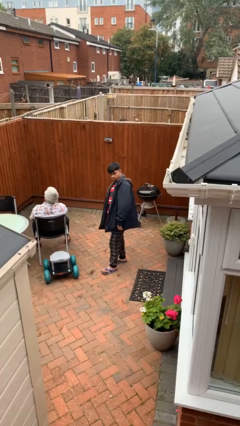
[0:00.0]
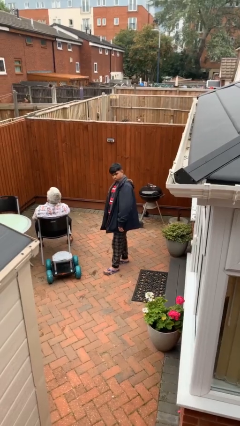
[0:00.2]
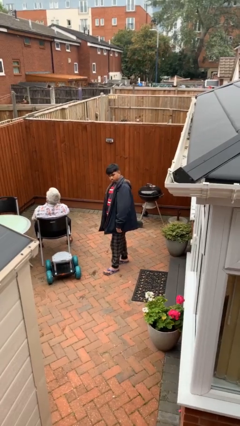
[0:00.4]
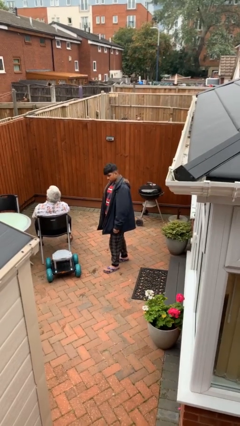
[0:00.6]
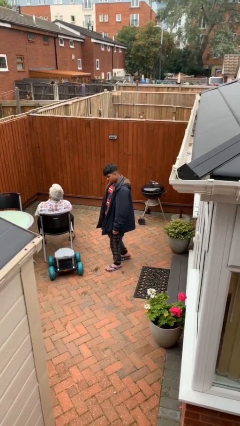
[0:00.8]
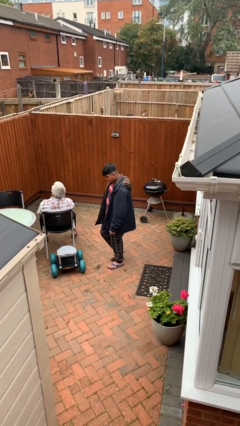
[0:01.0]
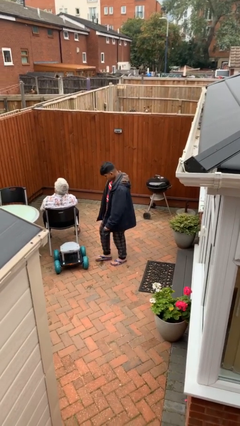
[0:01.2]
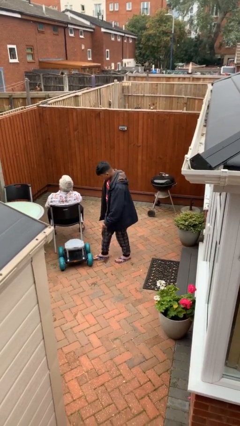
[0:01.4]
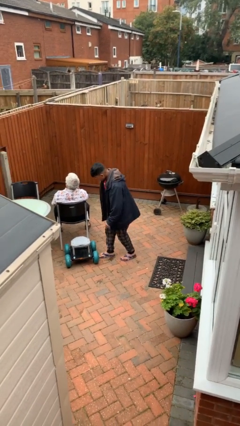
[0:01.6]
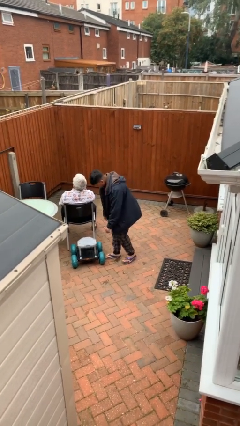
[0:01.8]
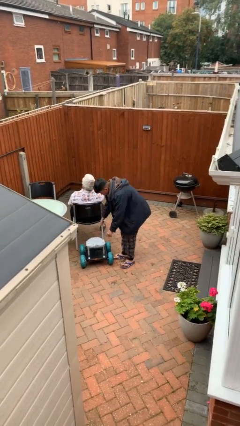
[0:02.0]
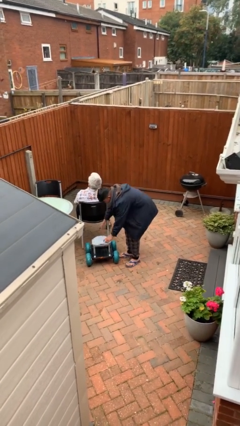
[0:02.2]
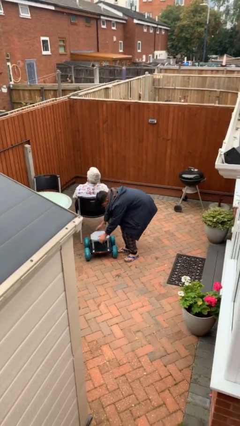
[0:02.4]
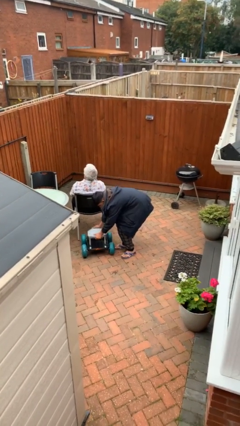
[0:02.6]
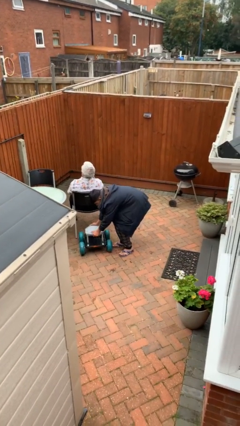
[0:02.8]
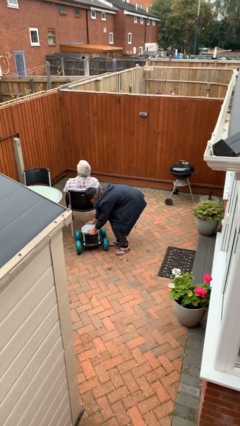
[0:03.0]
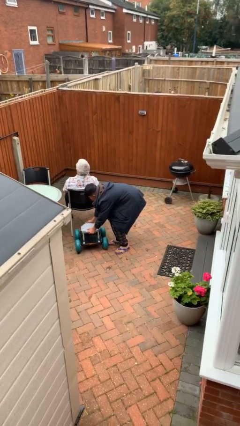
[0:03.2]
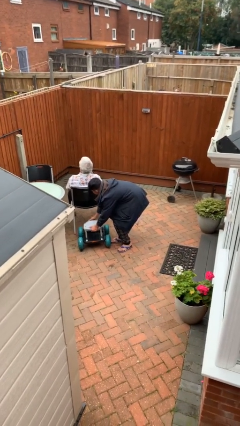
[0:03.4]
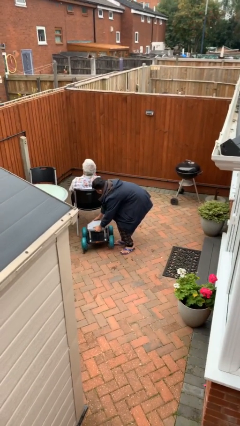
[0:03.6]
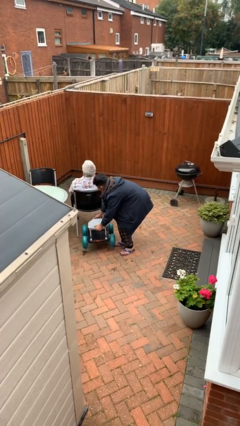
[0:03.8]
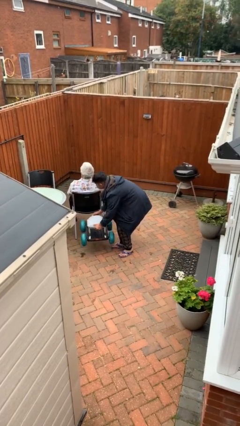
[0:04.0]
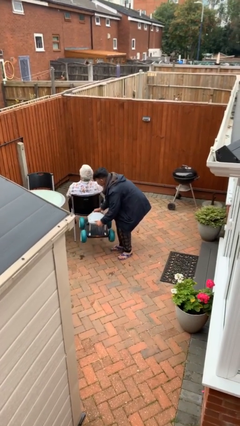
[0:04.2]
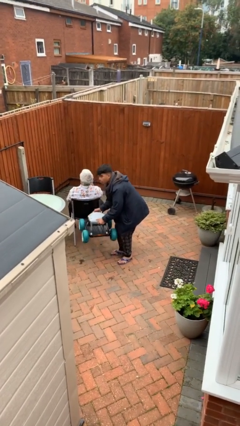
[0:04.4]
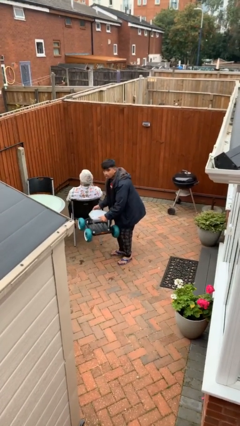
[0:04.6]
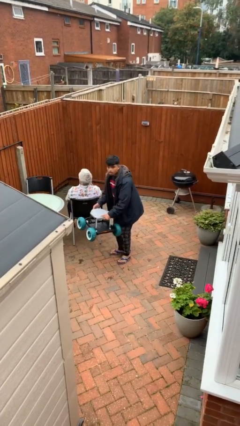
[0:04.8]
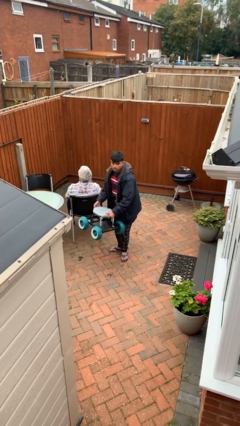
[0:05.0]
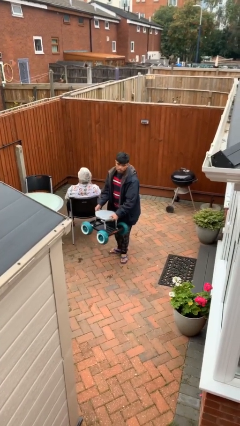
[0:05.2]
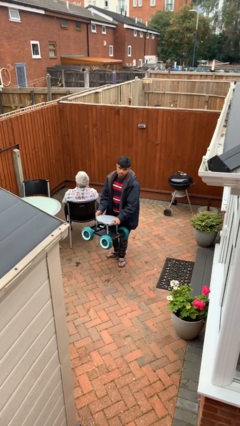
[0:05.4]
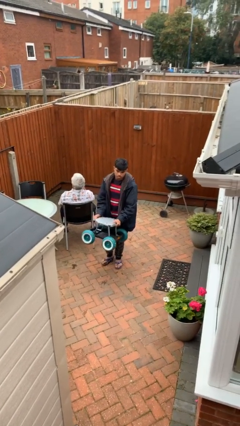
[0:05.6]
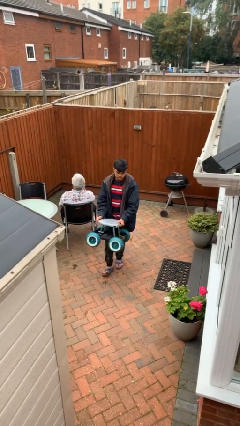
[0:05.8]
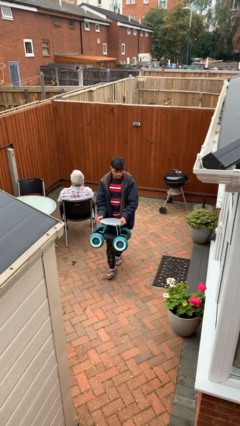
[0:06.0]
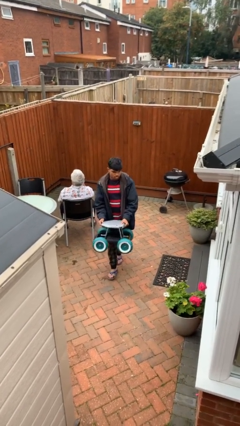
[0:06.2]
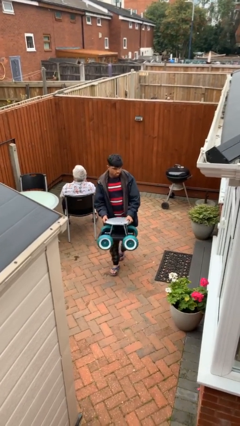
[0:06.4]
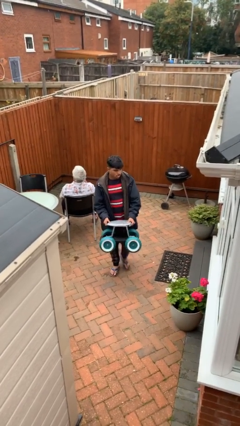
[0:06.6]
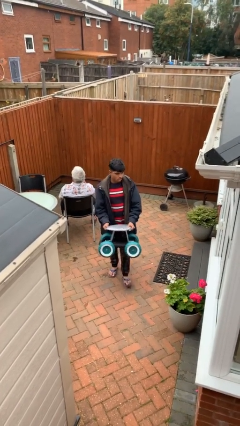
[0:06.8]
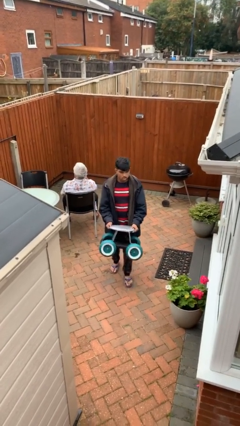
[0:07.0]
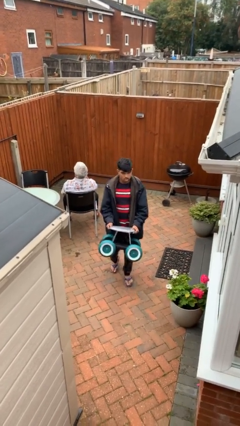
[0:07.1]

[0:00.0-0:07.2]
person steals object from person

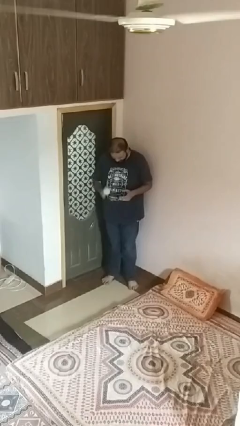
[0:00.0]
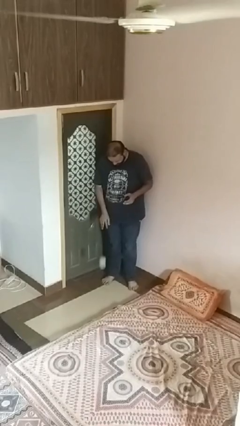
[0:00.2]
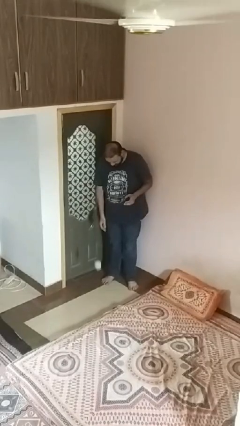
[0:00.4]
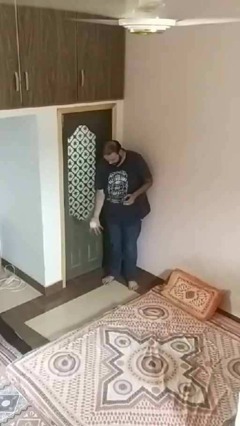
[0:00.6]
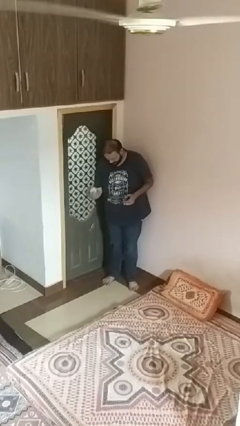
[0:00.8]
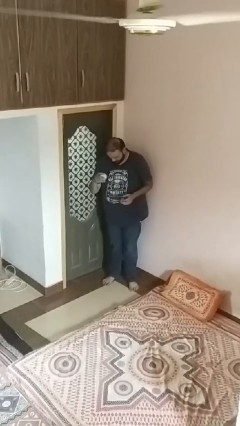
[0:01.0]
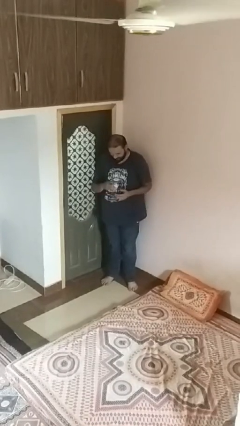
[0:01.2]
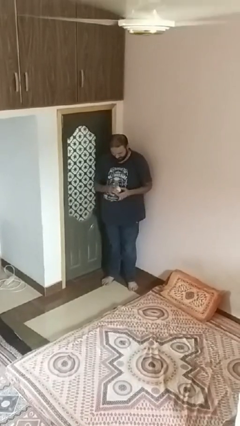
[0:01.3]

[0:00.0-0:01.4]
person bounces ball on floor

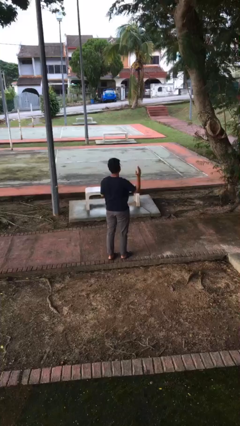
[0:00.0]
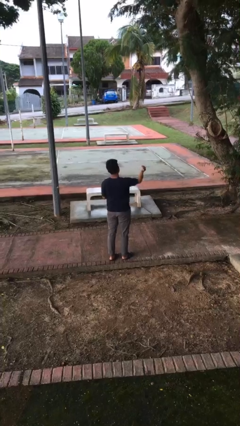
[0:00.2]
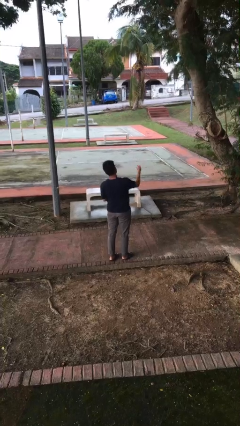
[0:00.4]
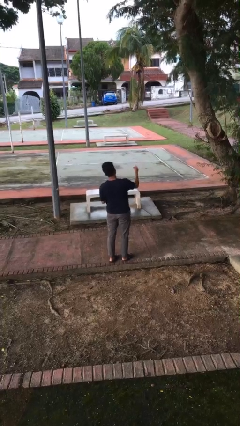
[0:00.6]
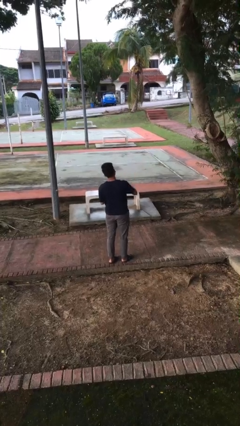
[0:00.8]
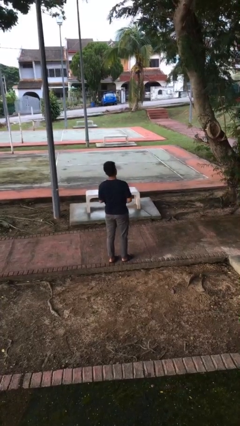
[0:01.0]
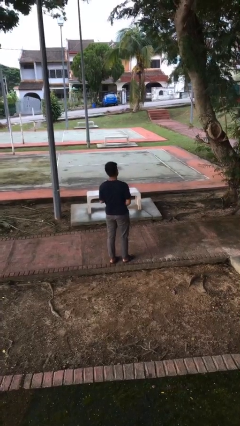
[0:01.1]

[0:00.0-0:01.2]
person karate chop

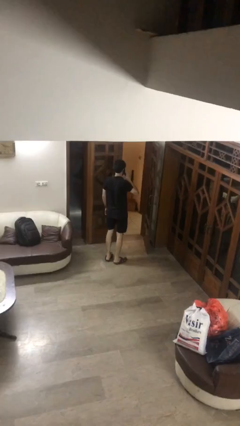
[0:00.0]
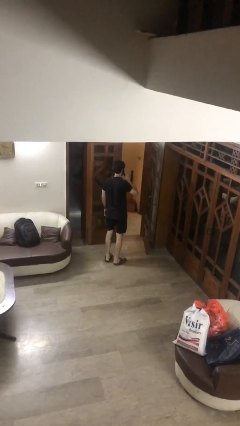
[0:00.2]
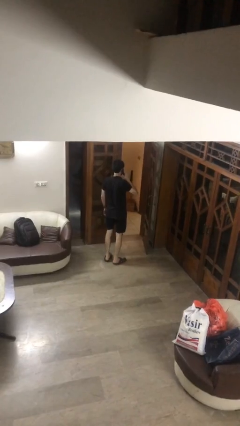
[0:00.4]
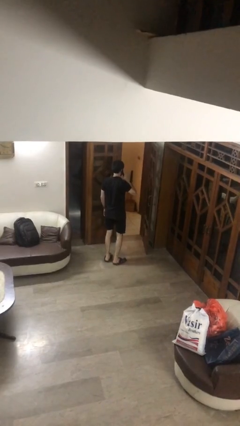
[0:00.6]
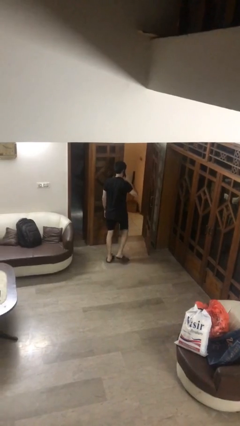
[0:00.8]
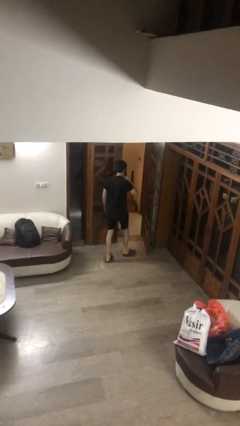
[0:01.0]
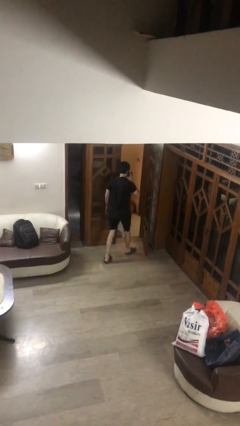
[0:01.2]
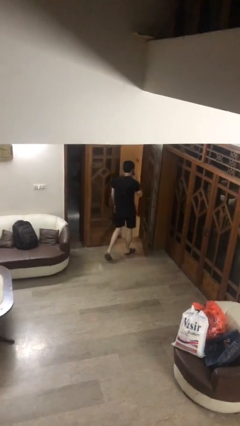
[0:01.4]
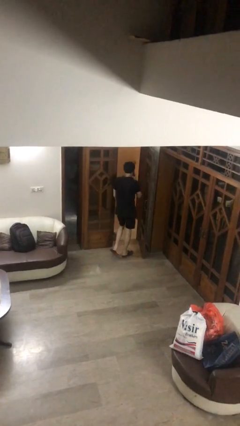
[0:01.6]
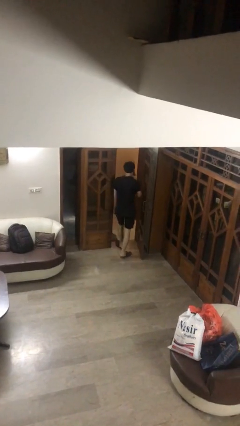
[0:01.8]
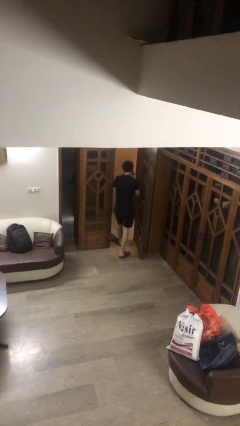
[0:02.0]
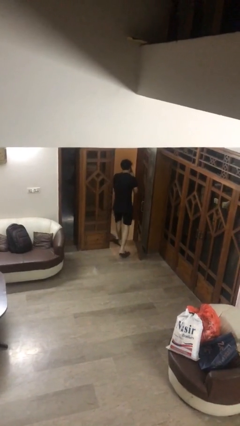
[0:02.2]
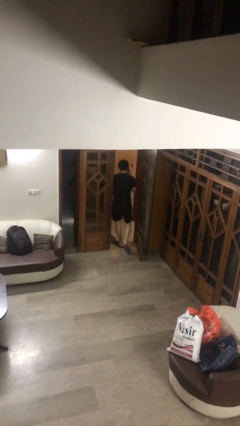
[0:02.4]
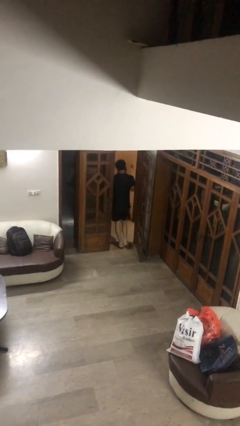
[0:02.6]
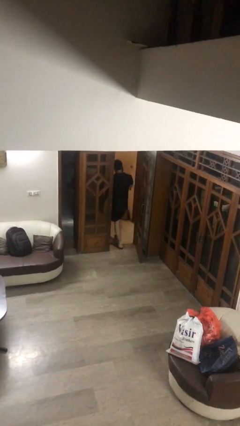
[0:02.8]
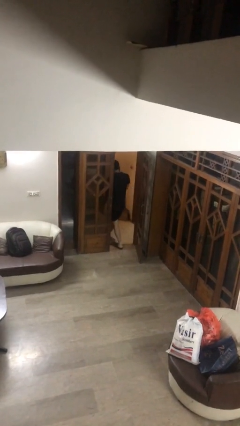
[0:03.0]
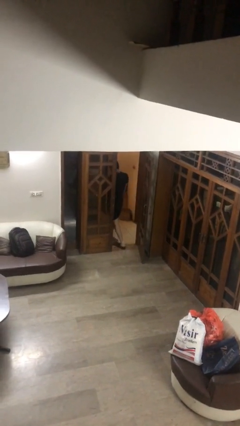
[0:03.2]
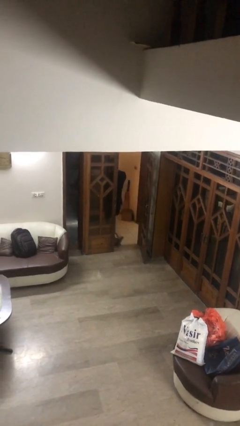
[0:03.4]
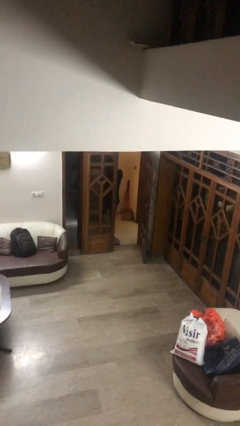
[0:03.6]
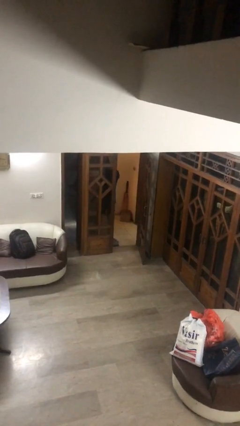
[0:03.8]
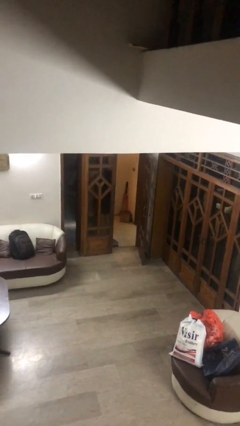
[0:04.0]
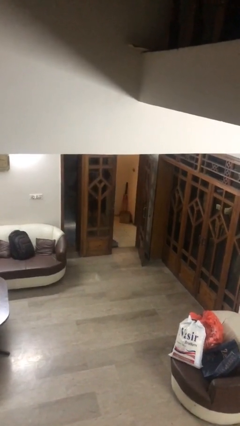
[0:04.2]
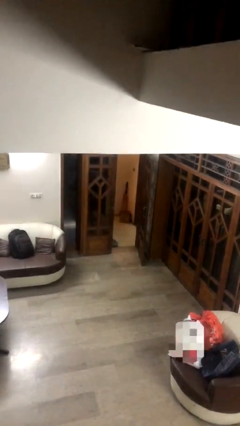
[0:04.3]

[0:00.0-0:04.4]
person exits scene through structure

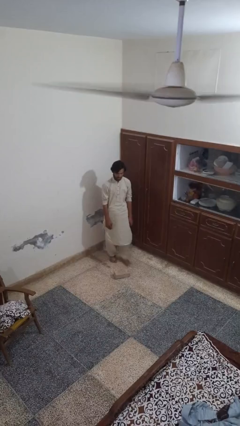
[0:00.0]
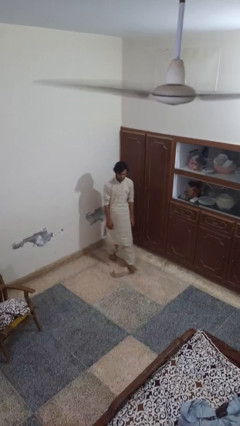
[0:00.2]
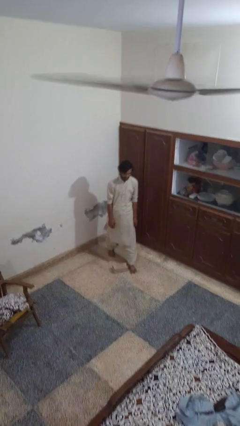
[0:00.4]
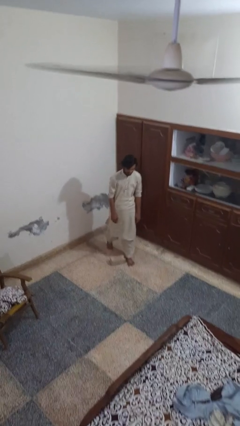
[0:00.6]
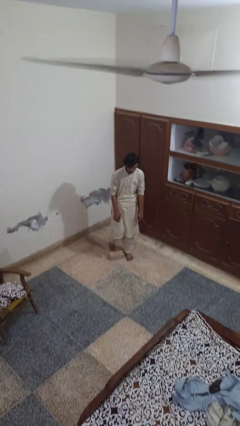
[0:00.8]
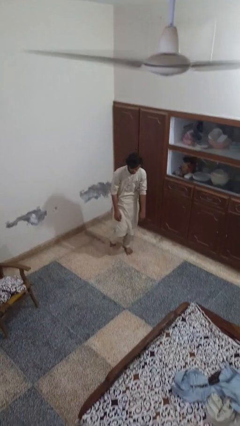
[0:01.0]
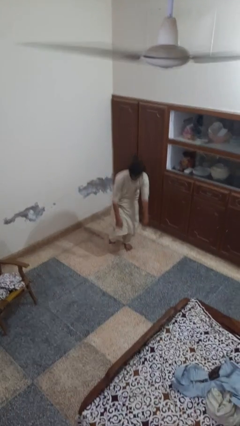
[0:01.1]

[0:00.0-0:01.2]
person trips on object on floor

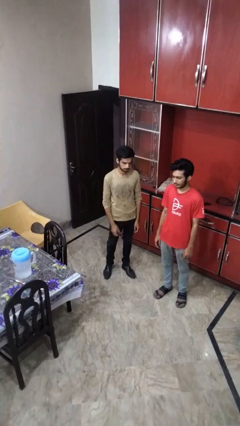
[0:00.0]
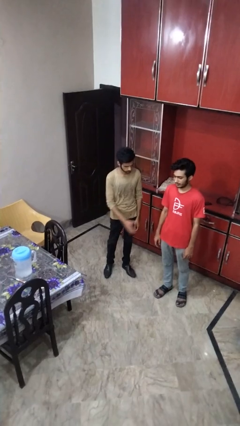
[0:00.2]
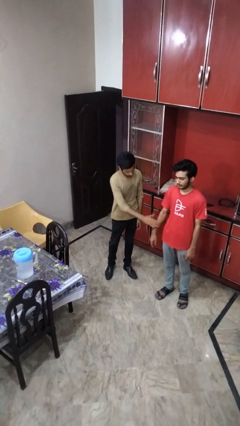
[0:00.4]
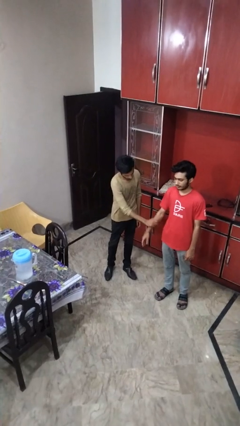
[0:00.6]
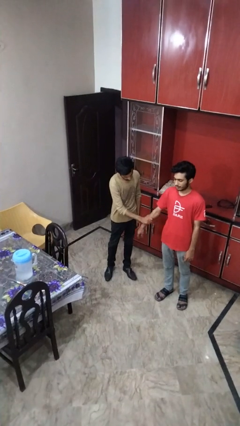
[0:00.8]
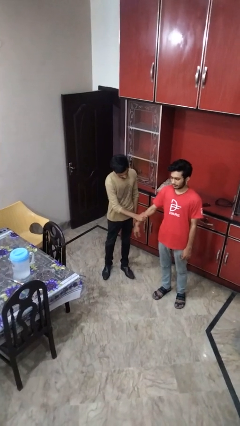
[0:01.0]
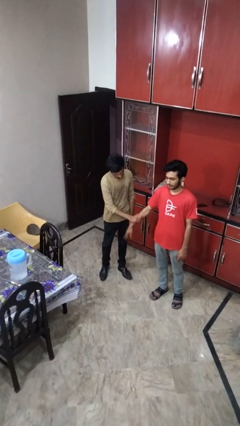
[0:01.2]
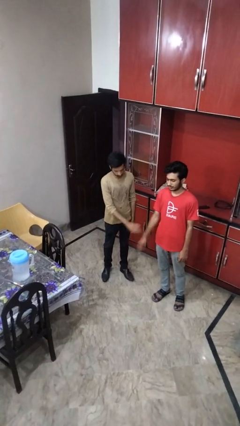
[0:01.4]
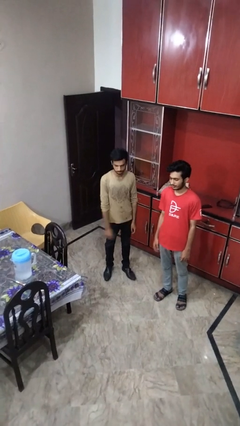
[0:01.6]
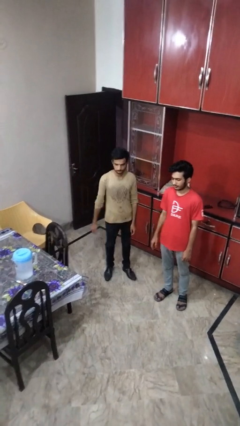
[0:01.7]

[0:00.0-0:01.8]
person grabs person by forearm
